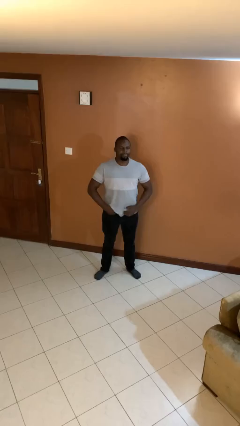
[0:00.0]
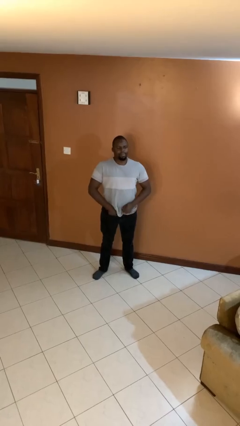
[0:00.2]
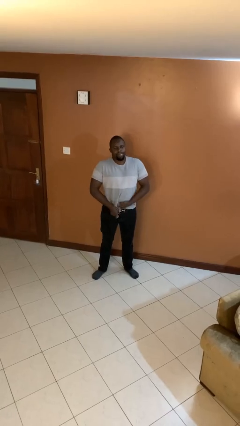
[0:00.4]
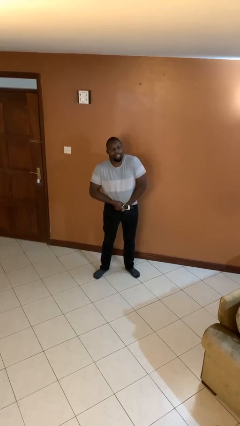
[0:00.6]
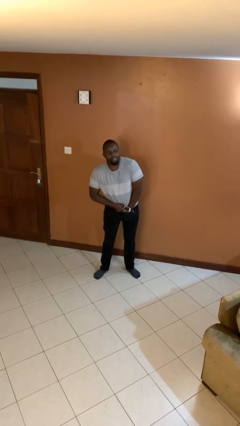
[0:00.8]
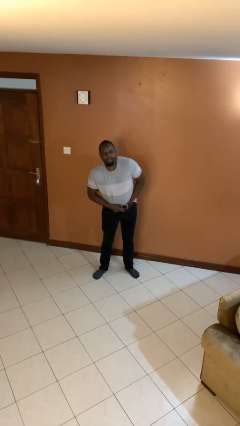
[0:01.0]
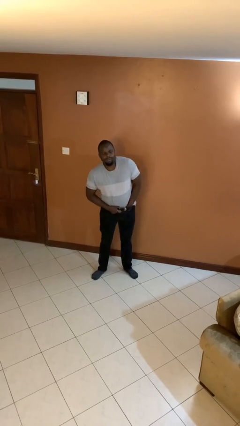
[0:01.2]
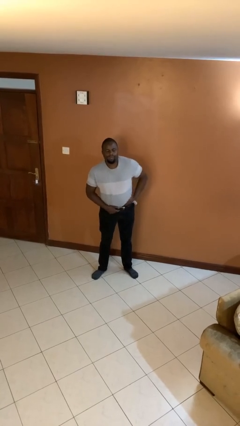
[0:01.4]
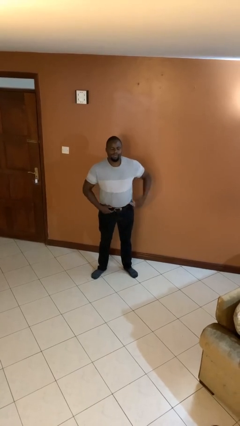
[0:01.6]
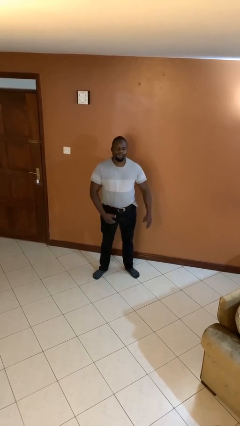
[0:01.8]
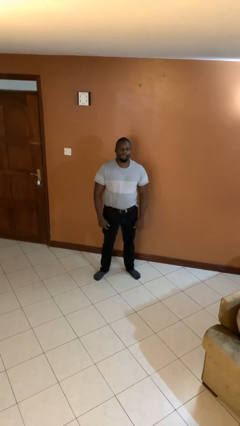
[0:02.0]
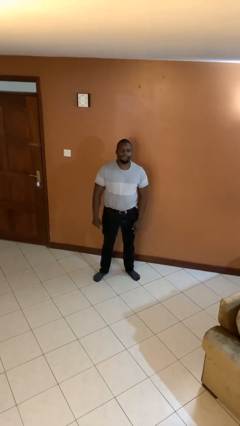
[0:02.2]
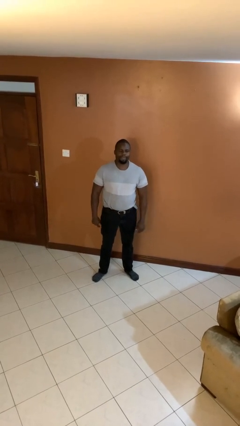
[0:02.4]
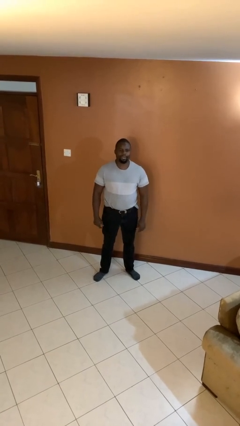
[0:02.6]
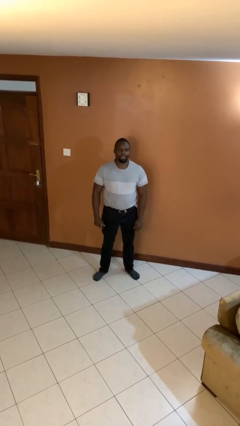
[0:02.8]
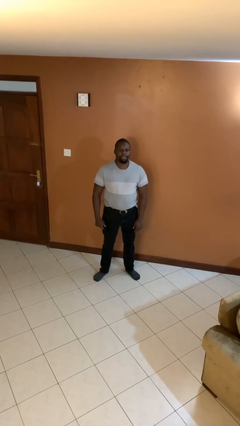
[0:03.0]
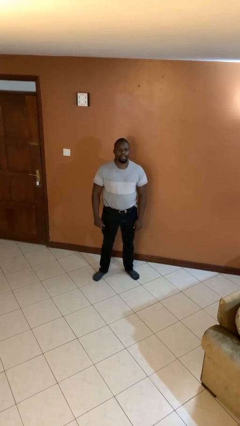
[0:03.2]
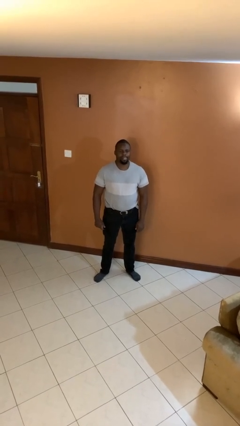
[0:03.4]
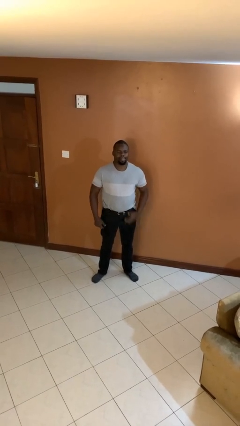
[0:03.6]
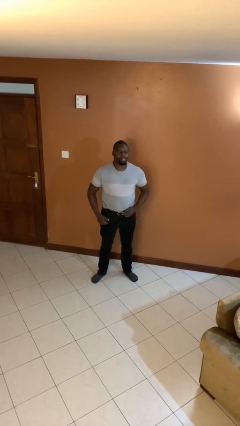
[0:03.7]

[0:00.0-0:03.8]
person tucks in shirt

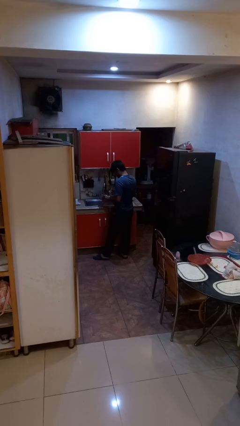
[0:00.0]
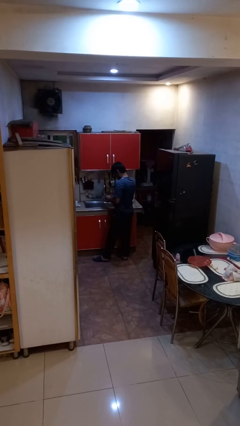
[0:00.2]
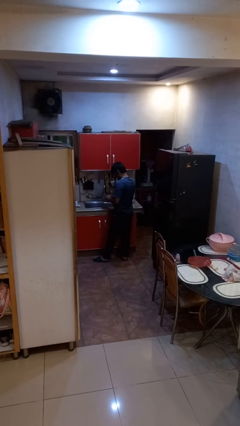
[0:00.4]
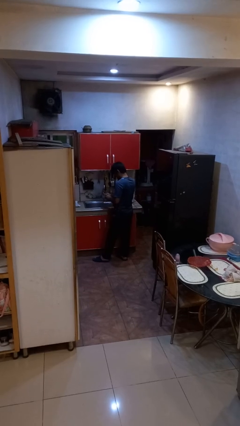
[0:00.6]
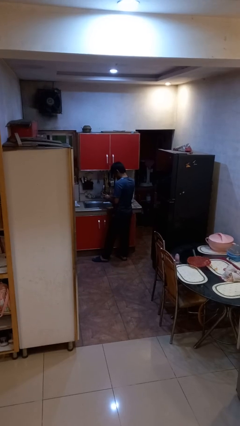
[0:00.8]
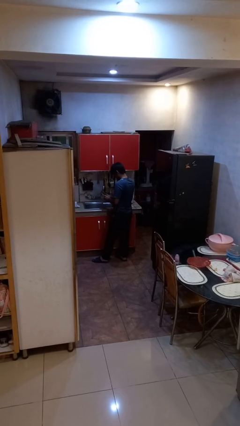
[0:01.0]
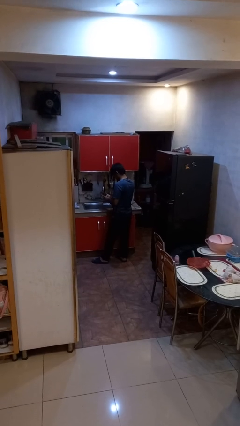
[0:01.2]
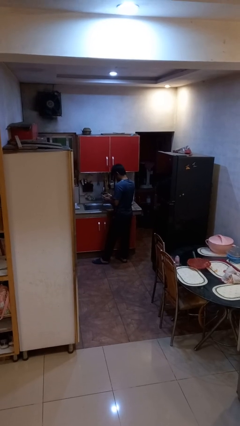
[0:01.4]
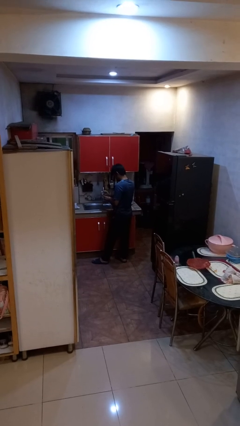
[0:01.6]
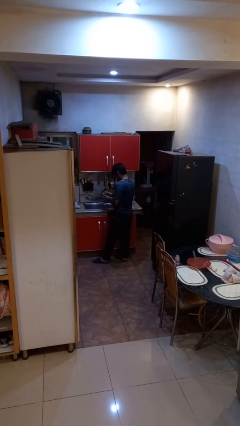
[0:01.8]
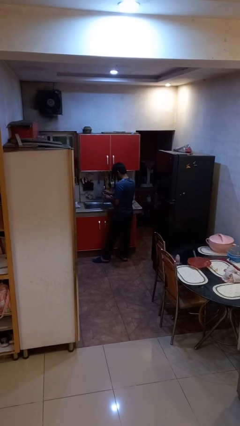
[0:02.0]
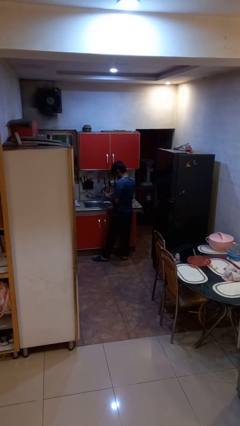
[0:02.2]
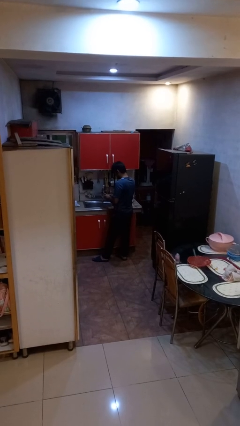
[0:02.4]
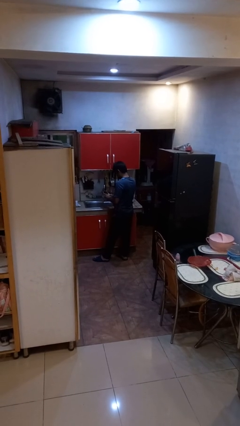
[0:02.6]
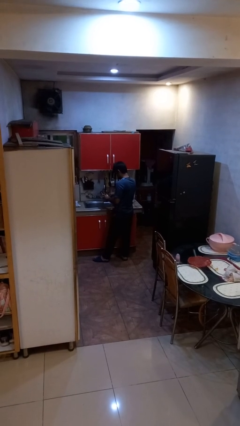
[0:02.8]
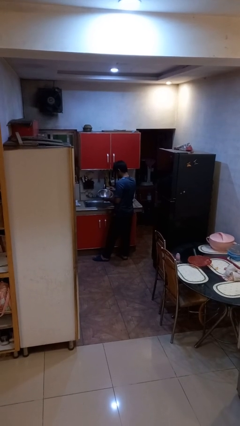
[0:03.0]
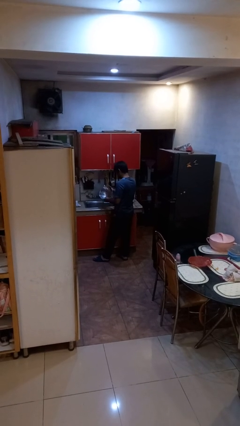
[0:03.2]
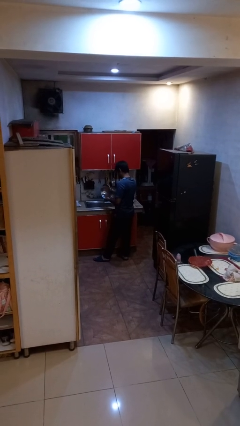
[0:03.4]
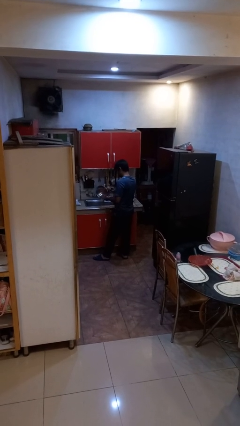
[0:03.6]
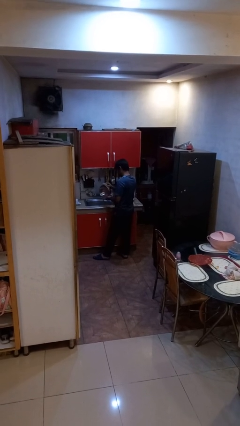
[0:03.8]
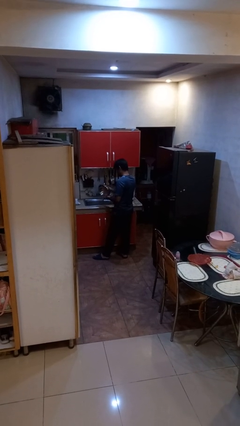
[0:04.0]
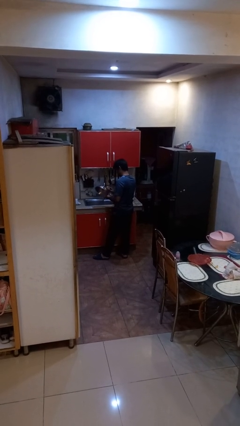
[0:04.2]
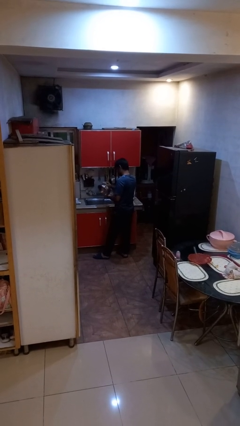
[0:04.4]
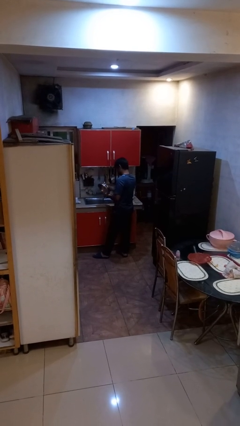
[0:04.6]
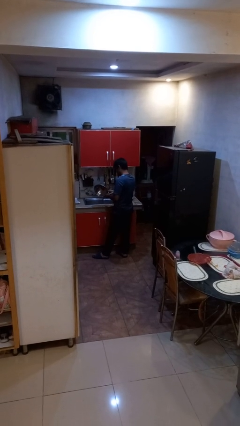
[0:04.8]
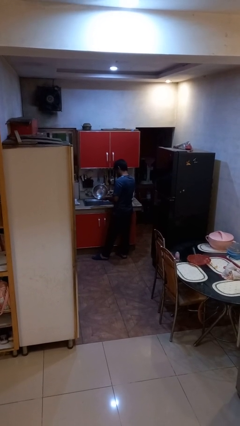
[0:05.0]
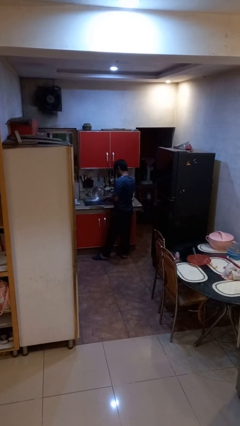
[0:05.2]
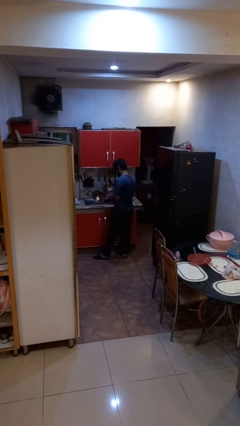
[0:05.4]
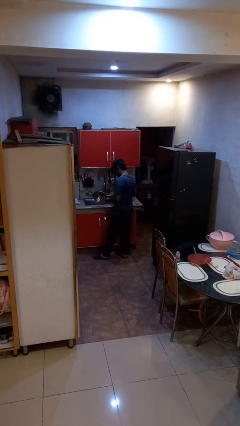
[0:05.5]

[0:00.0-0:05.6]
person washes dish

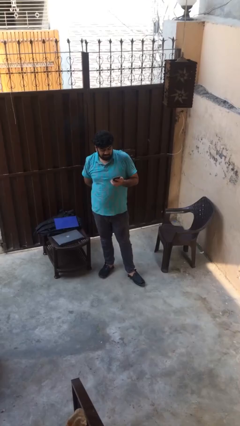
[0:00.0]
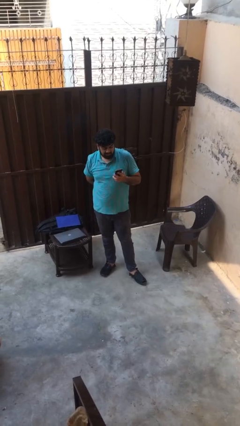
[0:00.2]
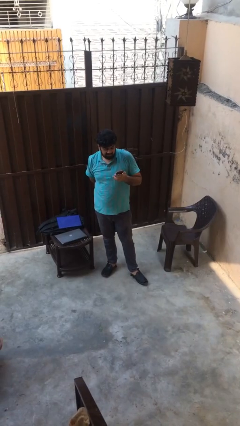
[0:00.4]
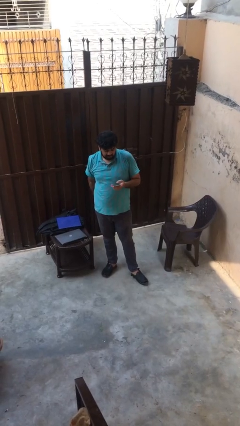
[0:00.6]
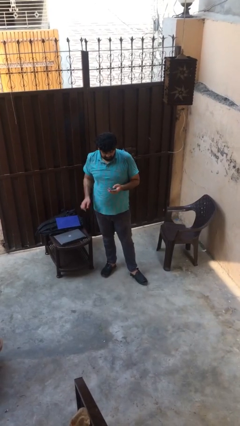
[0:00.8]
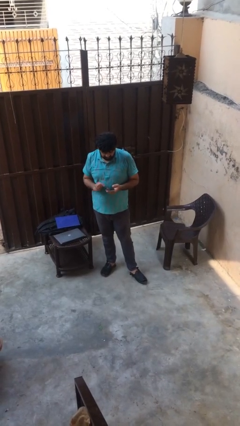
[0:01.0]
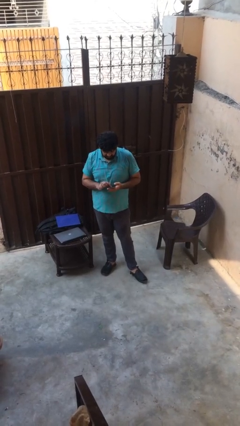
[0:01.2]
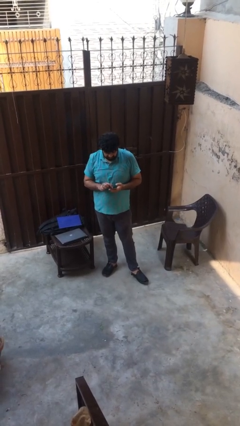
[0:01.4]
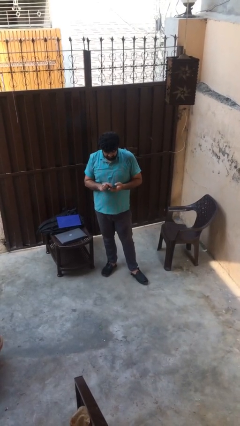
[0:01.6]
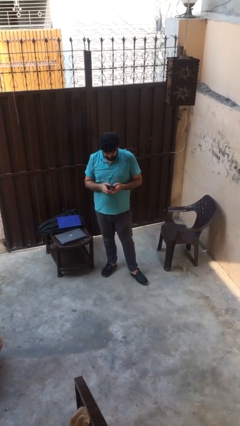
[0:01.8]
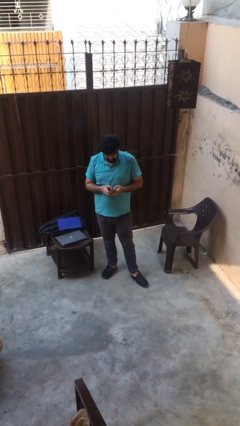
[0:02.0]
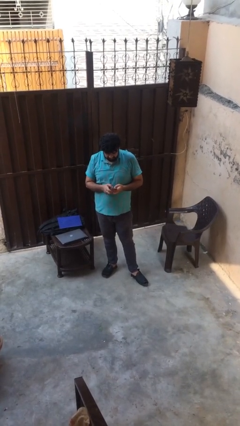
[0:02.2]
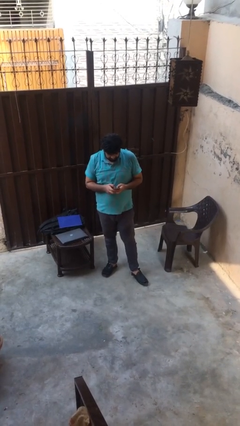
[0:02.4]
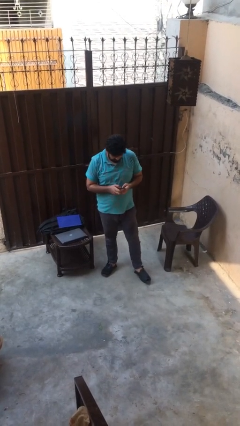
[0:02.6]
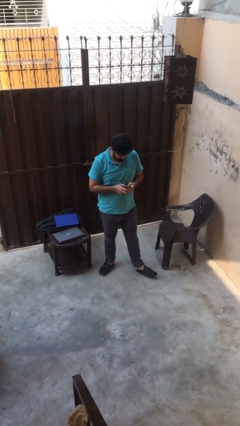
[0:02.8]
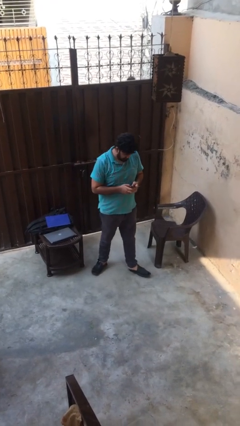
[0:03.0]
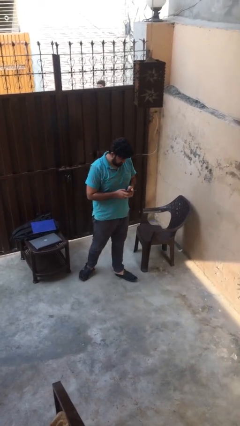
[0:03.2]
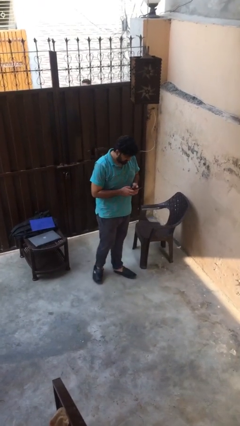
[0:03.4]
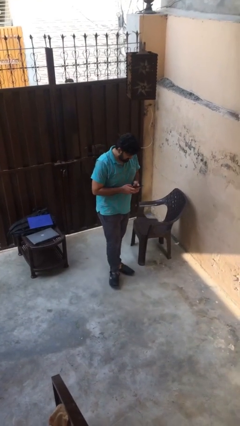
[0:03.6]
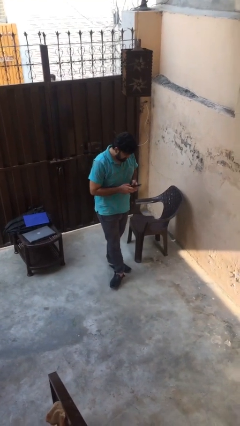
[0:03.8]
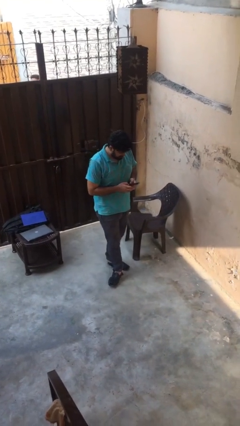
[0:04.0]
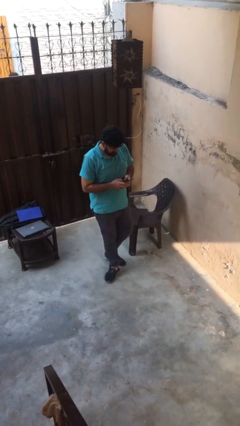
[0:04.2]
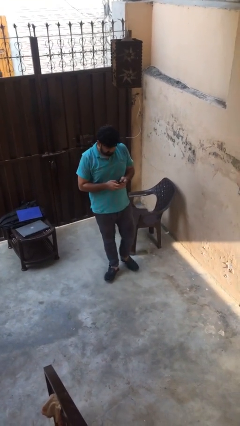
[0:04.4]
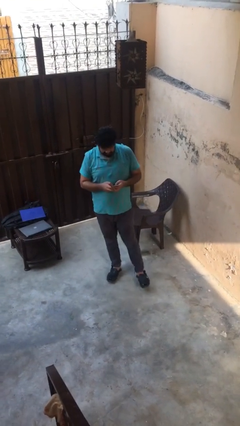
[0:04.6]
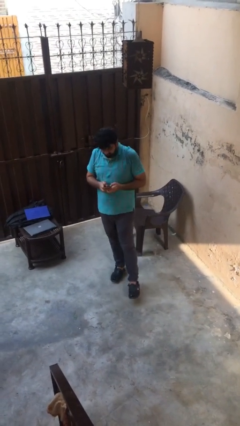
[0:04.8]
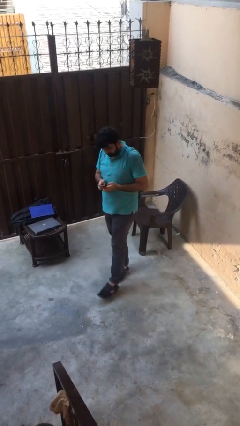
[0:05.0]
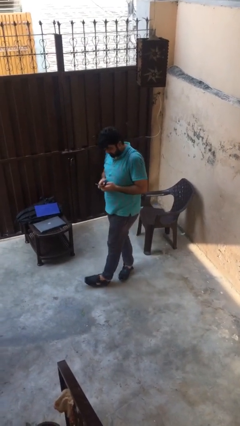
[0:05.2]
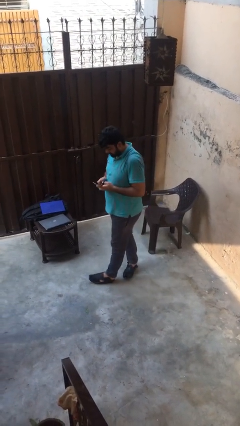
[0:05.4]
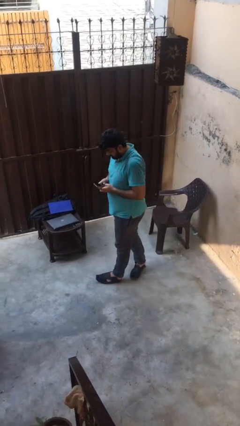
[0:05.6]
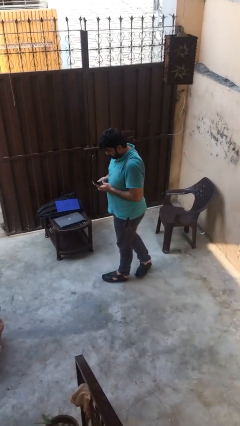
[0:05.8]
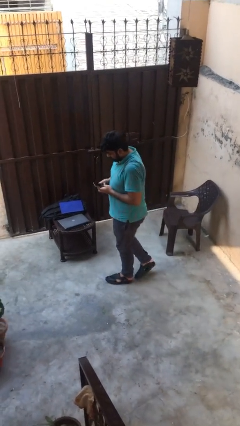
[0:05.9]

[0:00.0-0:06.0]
person texts on phone

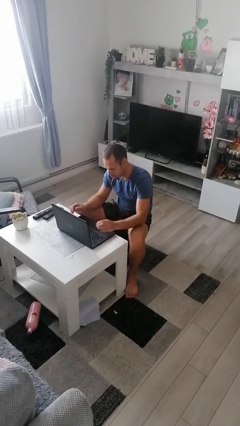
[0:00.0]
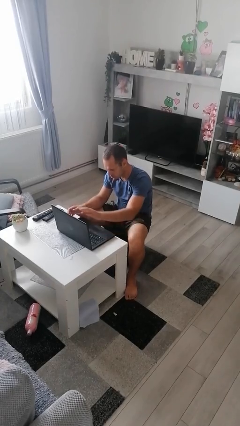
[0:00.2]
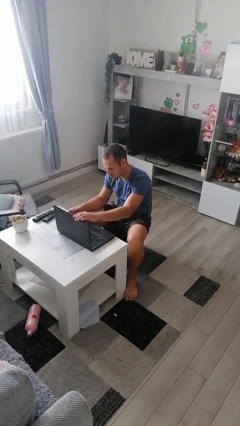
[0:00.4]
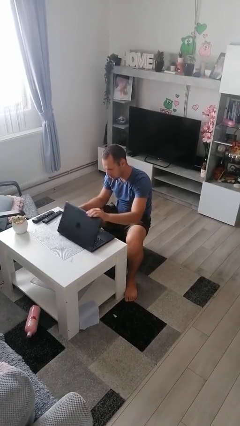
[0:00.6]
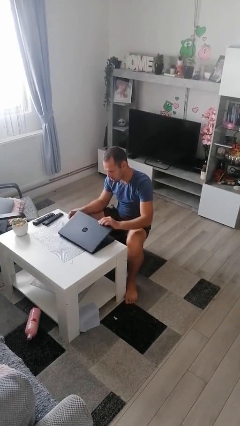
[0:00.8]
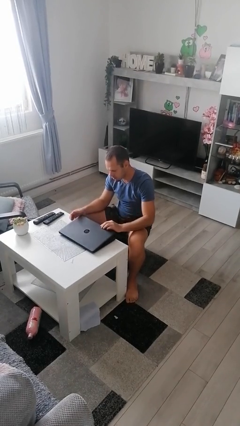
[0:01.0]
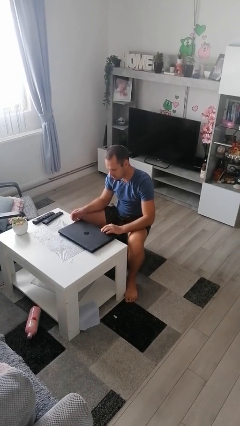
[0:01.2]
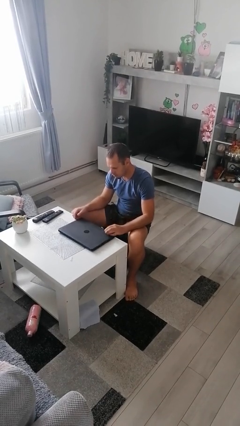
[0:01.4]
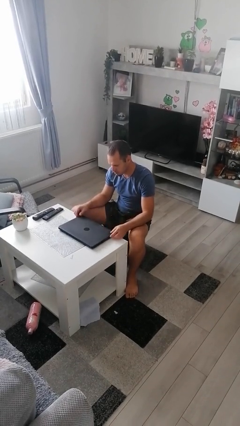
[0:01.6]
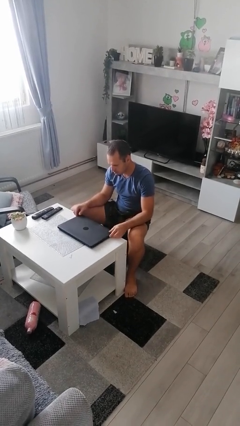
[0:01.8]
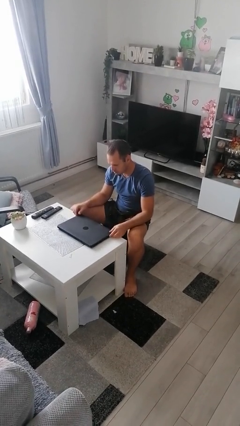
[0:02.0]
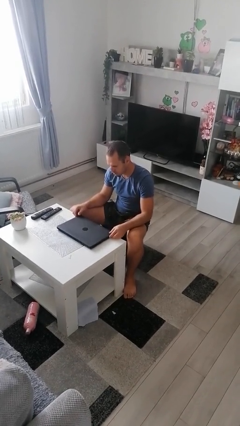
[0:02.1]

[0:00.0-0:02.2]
person closes laptop
